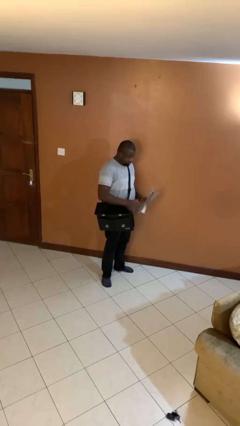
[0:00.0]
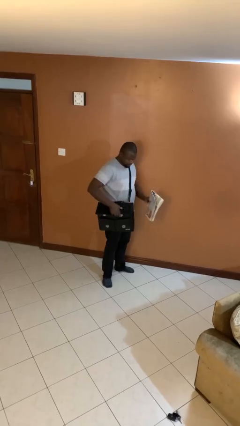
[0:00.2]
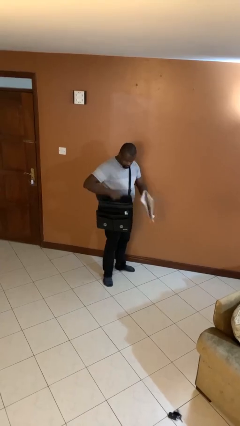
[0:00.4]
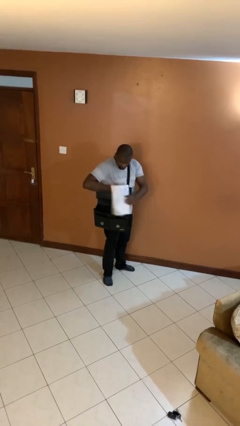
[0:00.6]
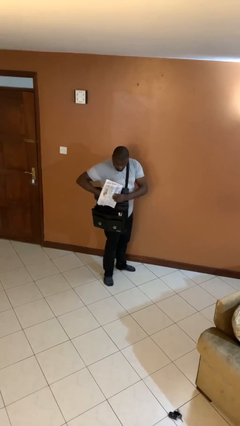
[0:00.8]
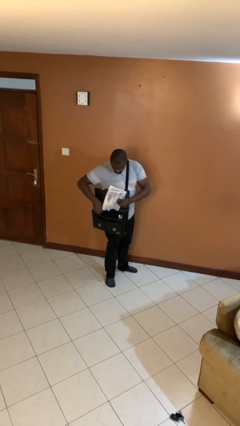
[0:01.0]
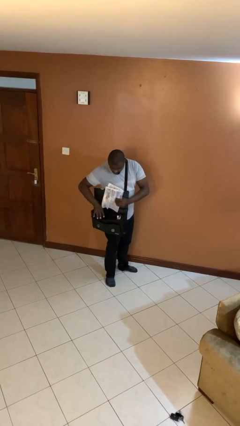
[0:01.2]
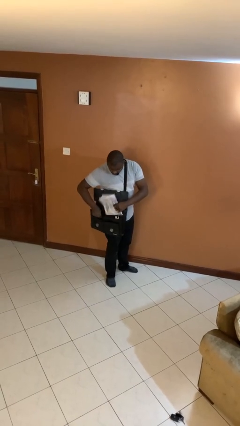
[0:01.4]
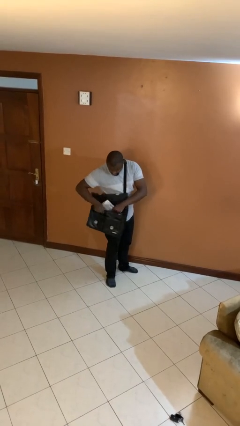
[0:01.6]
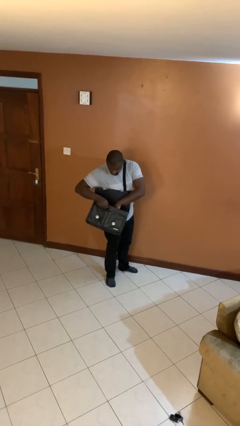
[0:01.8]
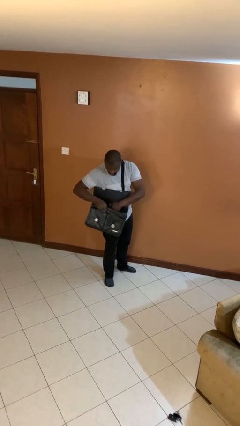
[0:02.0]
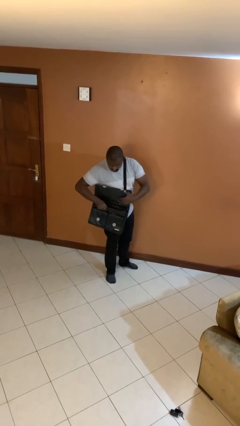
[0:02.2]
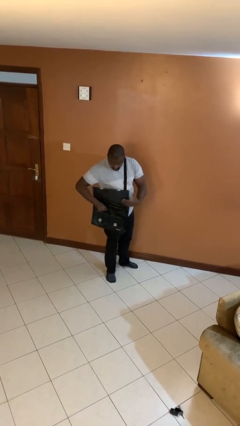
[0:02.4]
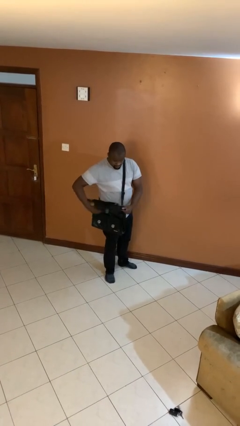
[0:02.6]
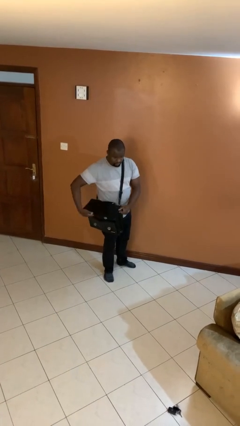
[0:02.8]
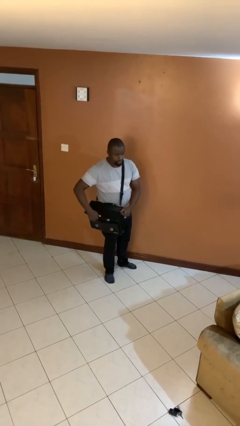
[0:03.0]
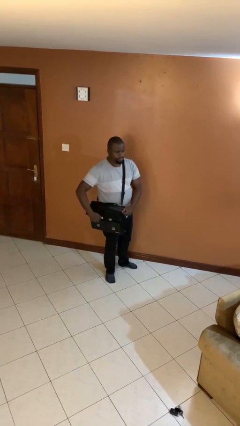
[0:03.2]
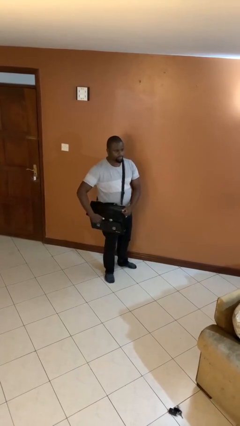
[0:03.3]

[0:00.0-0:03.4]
person puts object into purse

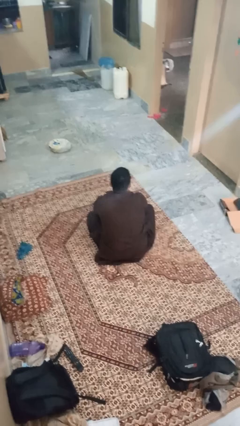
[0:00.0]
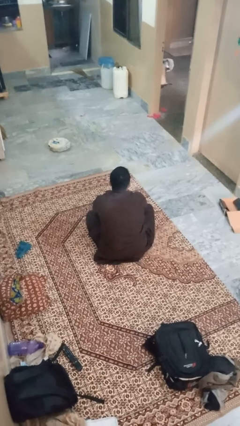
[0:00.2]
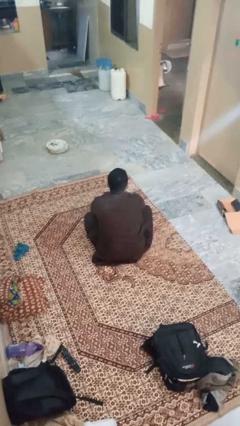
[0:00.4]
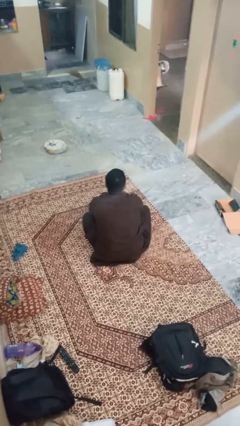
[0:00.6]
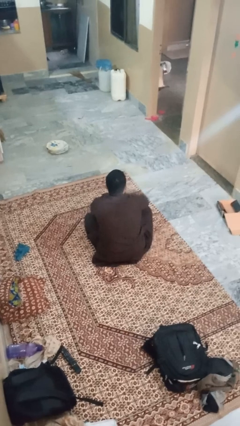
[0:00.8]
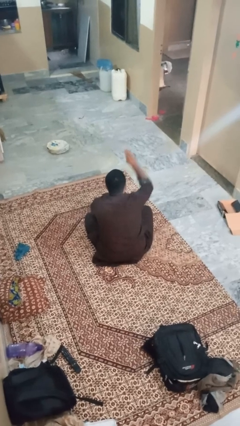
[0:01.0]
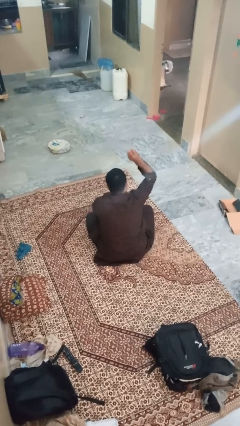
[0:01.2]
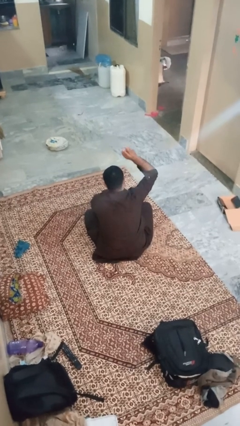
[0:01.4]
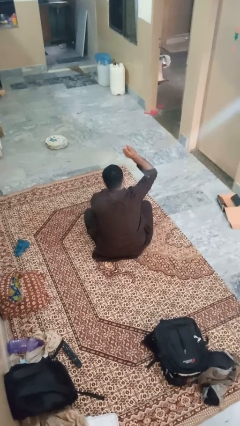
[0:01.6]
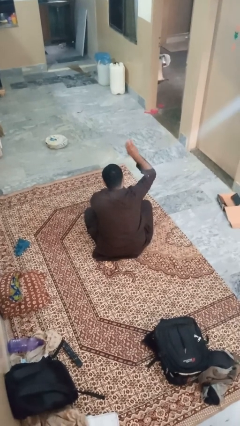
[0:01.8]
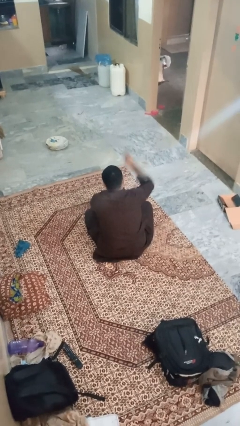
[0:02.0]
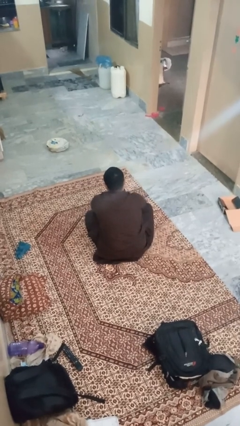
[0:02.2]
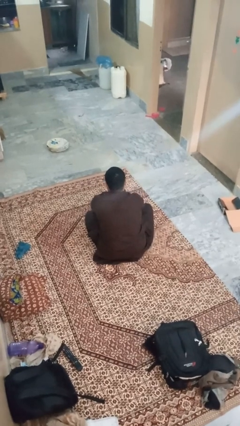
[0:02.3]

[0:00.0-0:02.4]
person gestures number three

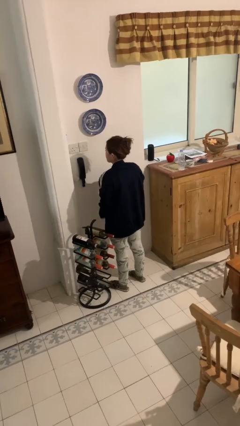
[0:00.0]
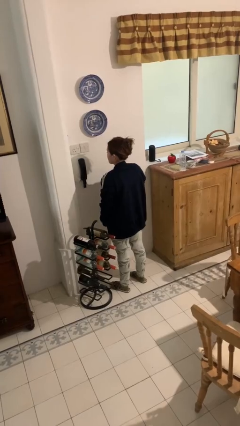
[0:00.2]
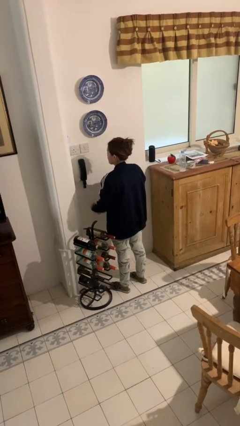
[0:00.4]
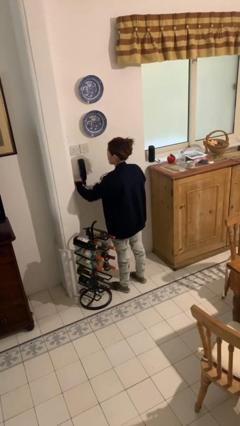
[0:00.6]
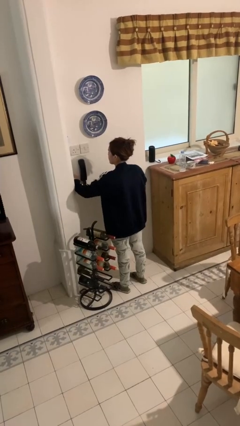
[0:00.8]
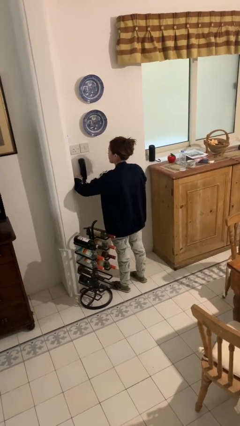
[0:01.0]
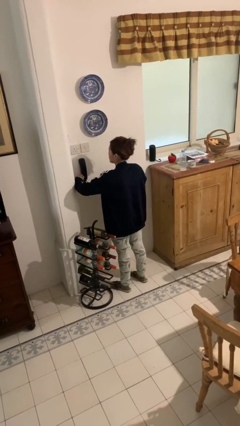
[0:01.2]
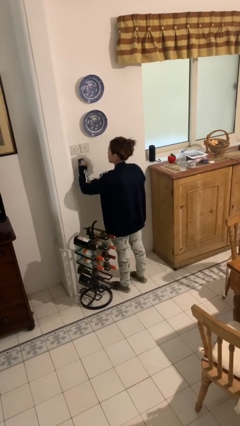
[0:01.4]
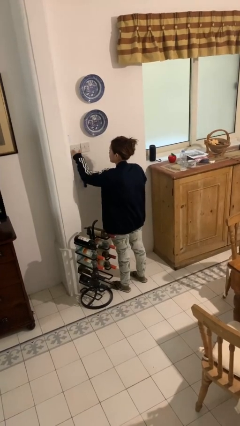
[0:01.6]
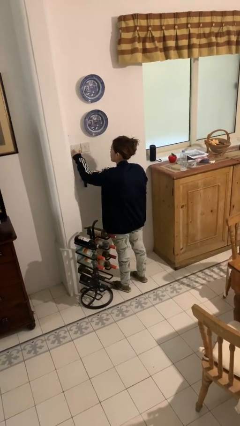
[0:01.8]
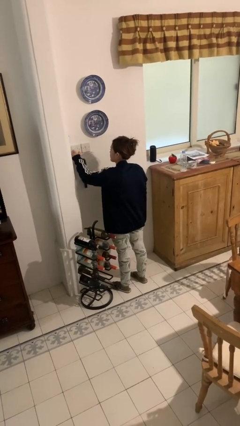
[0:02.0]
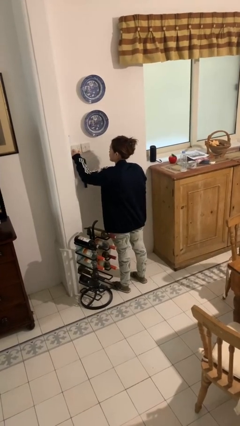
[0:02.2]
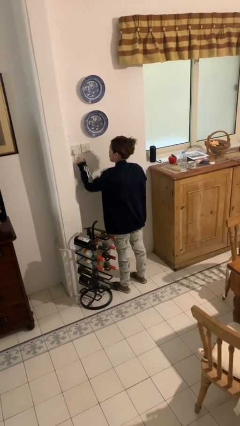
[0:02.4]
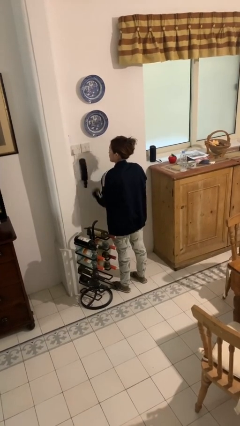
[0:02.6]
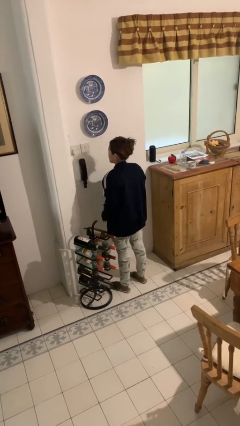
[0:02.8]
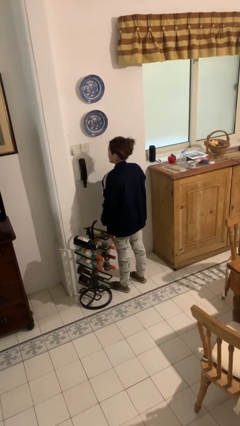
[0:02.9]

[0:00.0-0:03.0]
person plugs into electrical socket

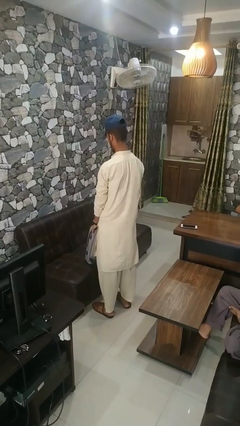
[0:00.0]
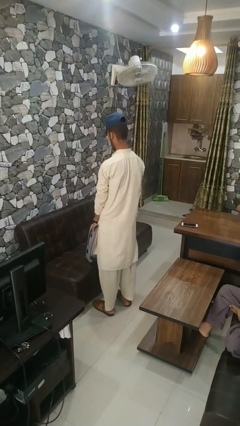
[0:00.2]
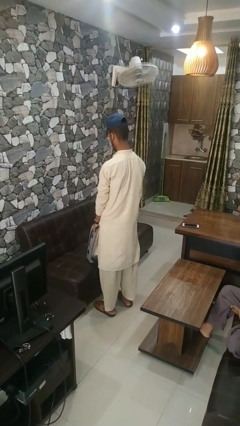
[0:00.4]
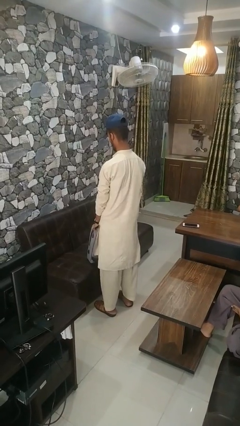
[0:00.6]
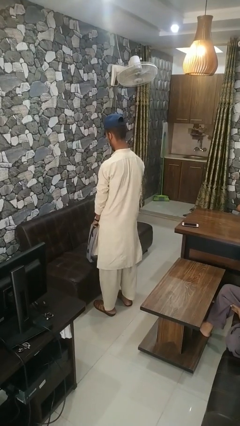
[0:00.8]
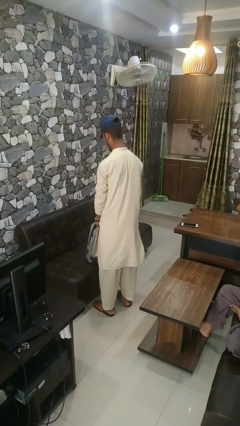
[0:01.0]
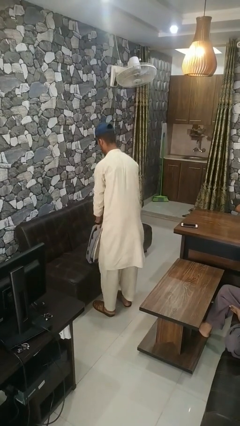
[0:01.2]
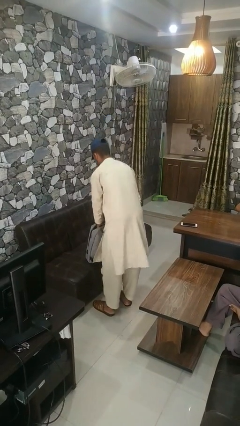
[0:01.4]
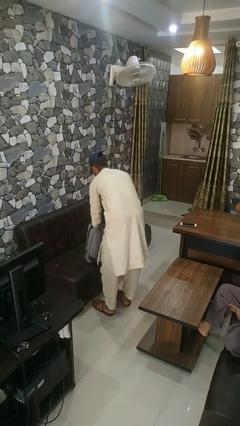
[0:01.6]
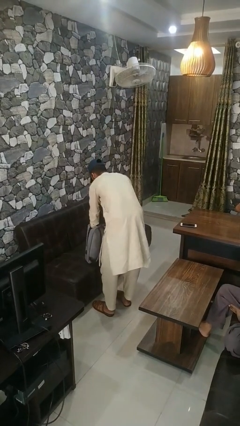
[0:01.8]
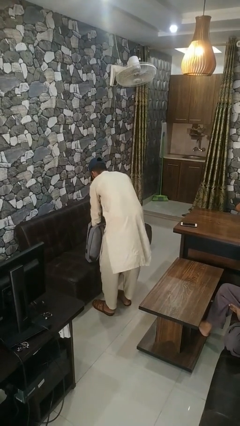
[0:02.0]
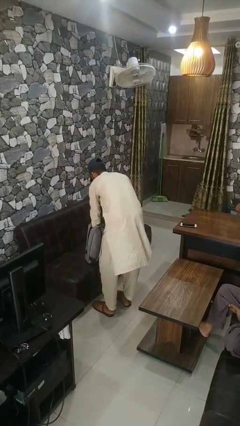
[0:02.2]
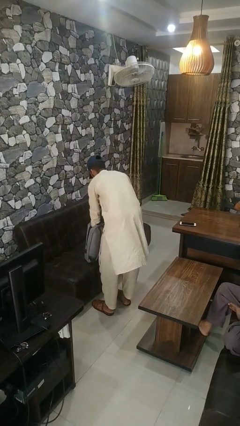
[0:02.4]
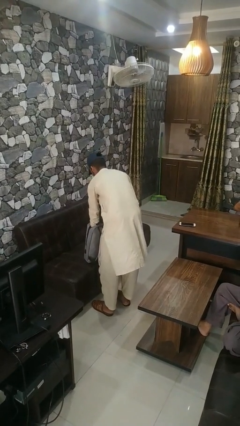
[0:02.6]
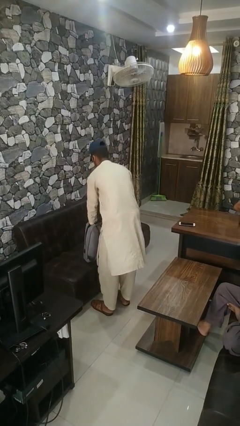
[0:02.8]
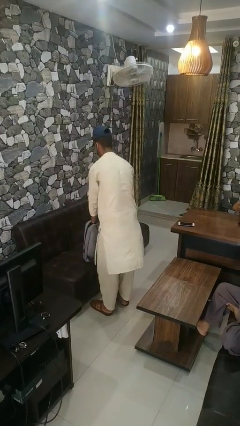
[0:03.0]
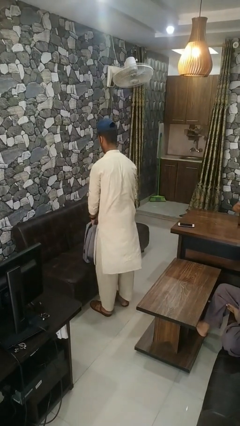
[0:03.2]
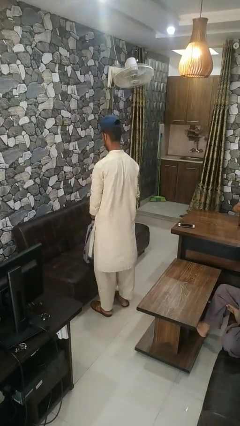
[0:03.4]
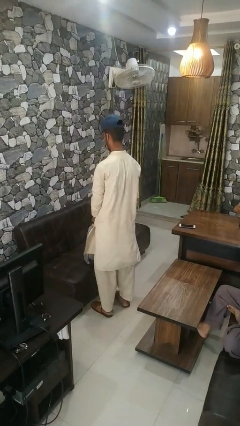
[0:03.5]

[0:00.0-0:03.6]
person searches in bag

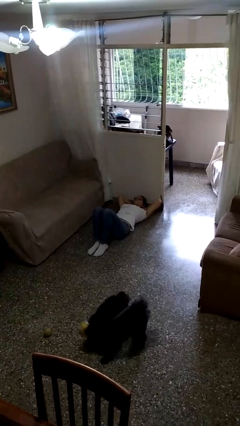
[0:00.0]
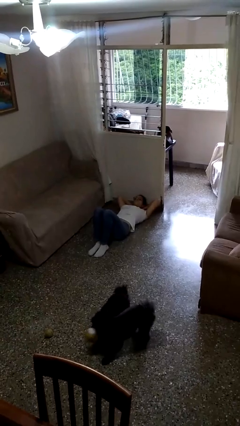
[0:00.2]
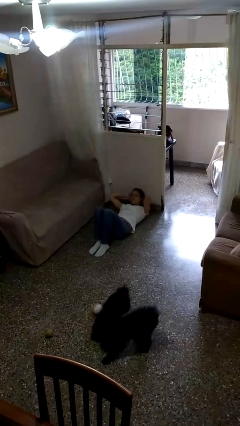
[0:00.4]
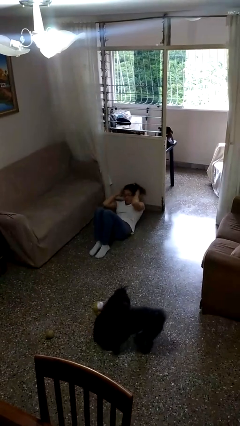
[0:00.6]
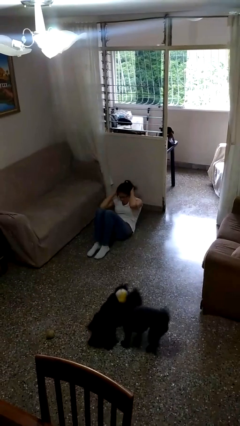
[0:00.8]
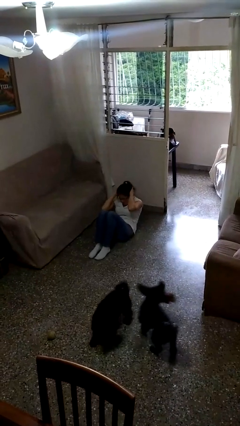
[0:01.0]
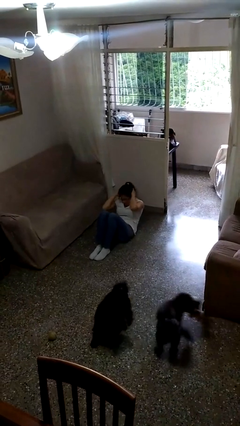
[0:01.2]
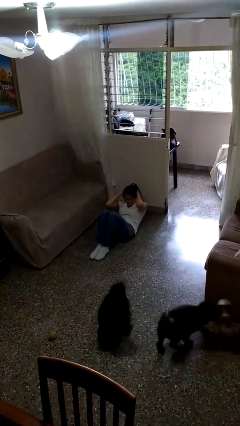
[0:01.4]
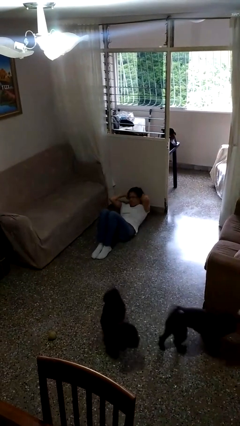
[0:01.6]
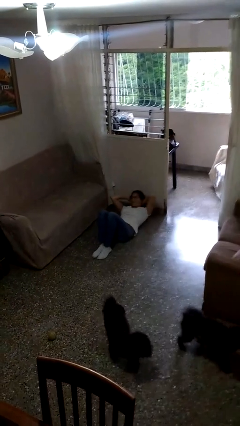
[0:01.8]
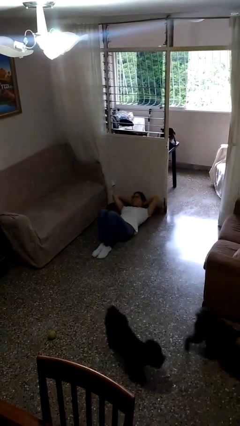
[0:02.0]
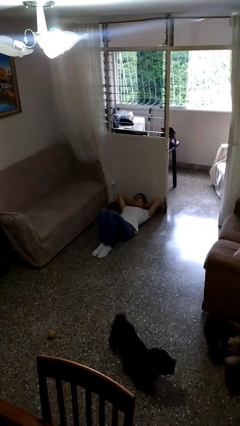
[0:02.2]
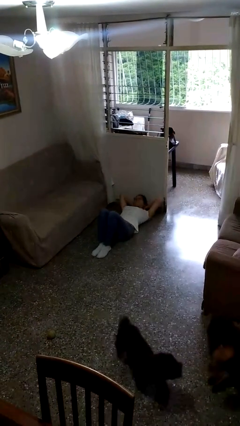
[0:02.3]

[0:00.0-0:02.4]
person exercises with situp

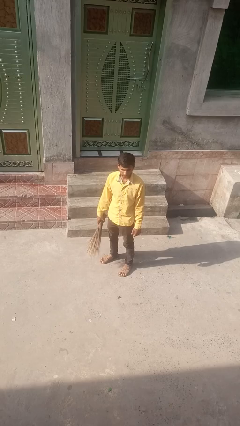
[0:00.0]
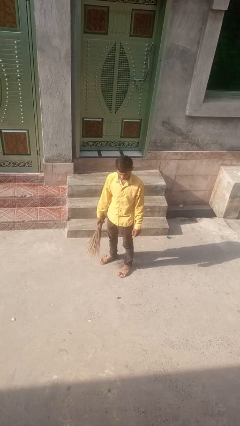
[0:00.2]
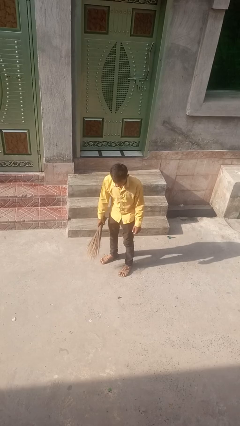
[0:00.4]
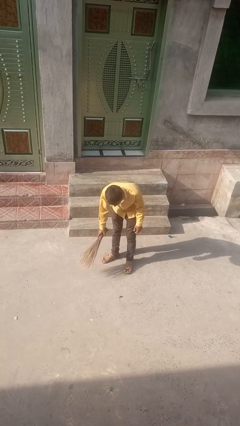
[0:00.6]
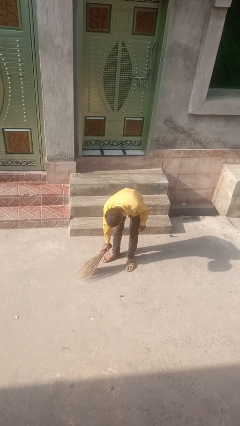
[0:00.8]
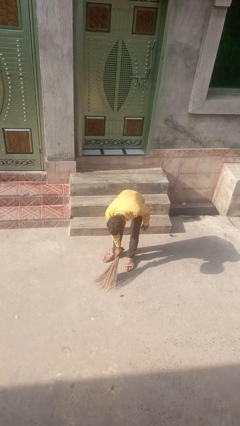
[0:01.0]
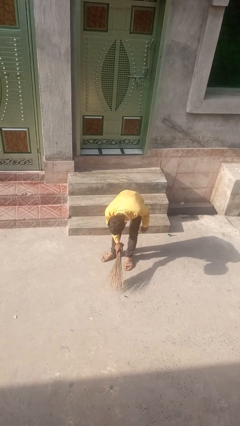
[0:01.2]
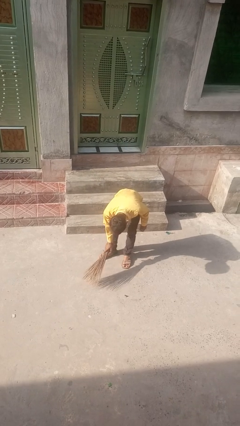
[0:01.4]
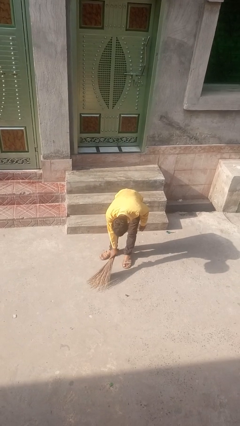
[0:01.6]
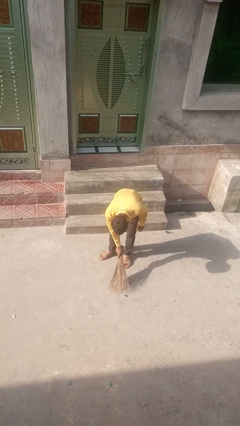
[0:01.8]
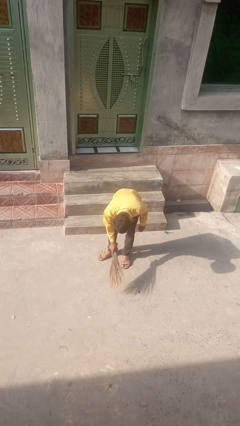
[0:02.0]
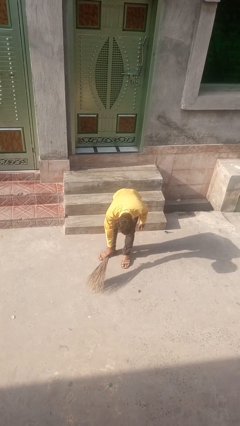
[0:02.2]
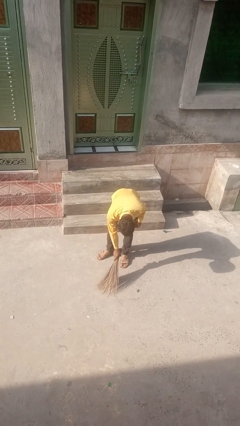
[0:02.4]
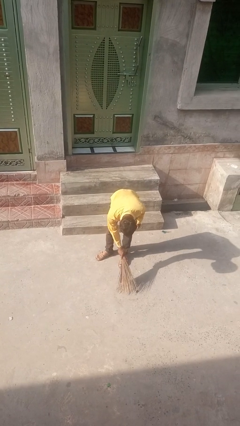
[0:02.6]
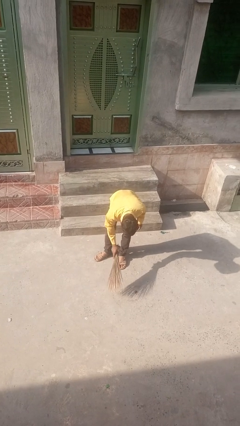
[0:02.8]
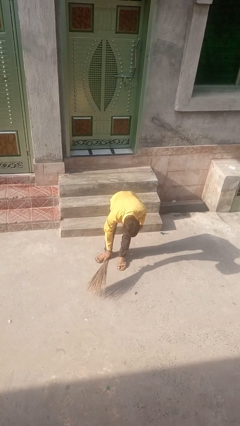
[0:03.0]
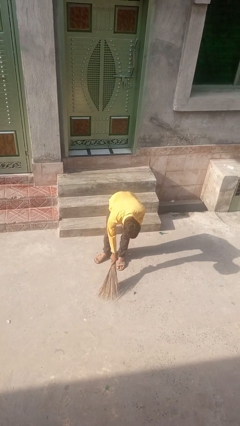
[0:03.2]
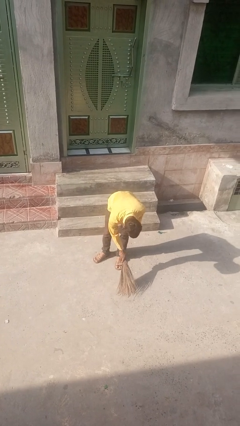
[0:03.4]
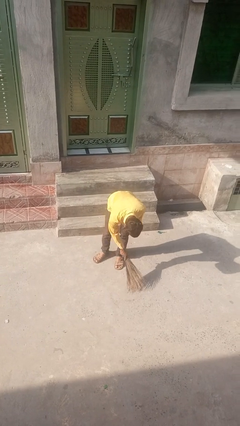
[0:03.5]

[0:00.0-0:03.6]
person sweeps floor
